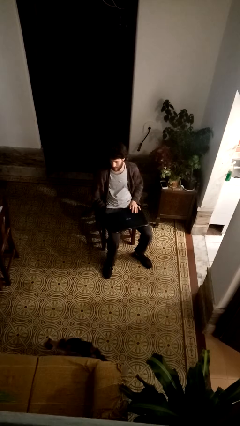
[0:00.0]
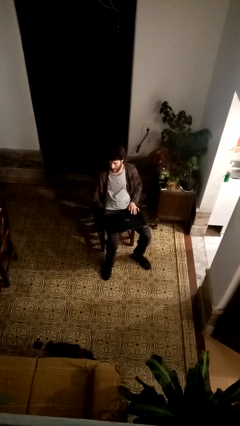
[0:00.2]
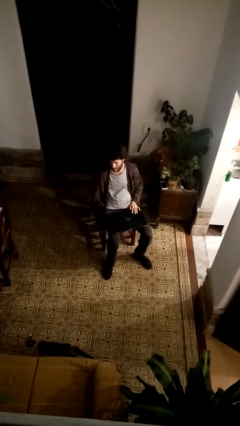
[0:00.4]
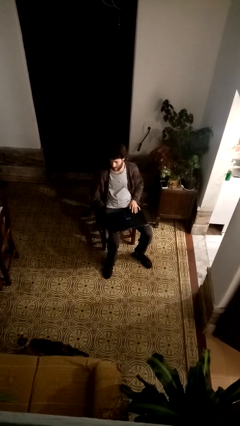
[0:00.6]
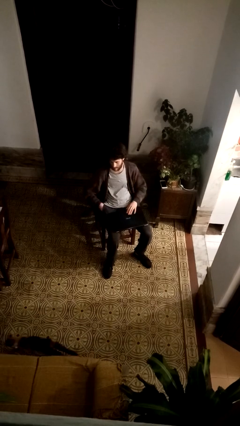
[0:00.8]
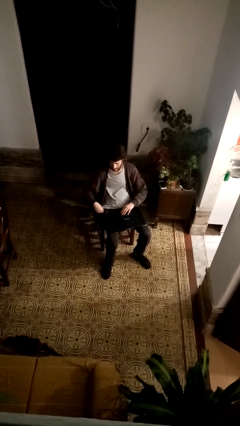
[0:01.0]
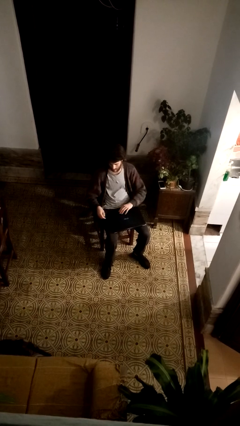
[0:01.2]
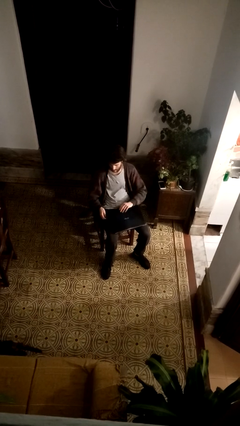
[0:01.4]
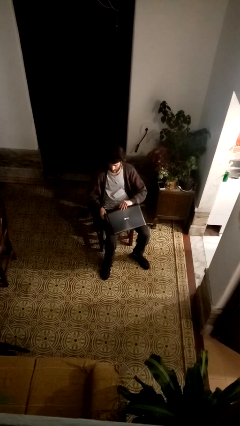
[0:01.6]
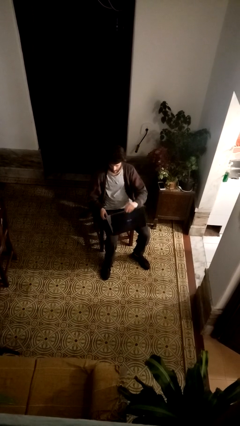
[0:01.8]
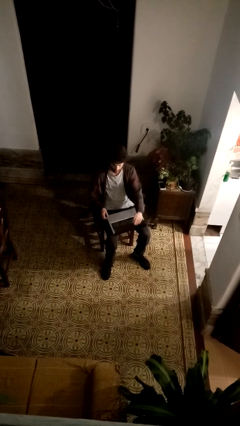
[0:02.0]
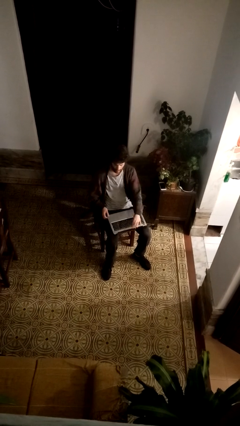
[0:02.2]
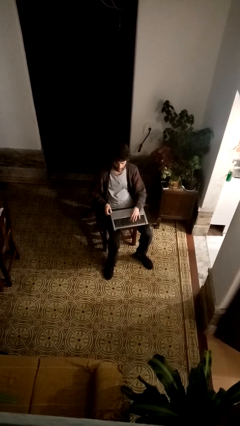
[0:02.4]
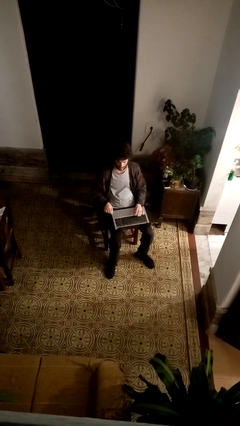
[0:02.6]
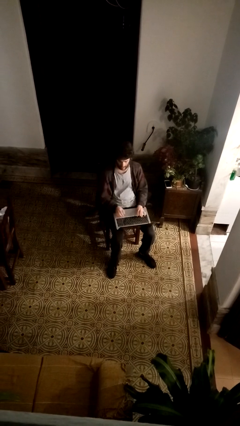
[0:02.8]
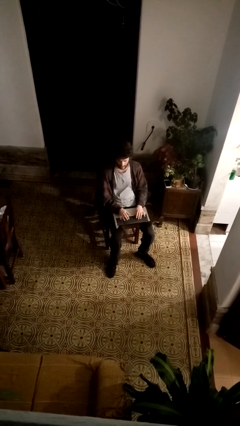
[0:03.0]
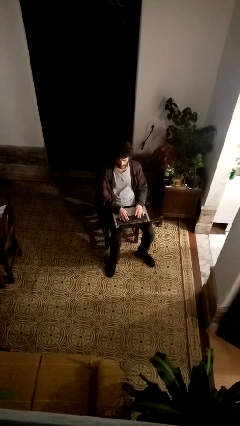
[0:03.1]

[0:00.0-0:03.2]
person opens laptop

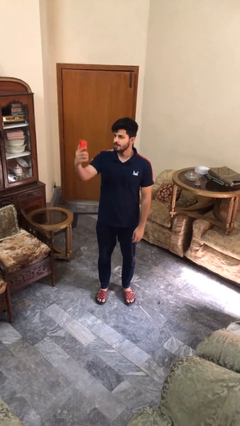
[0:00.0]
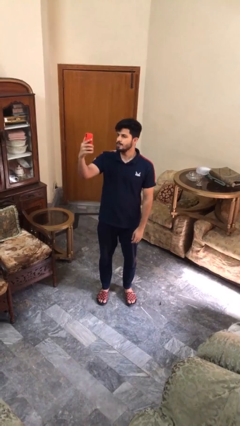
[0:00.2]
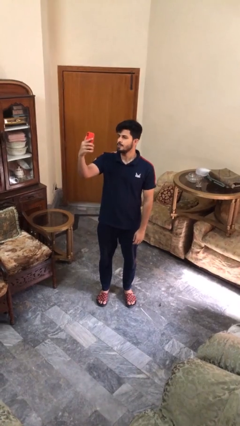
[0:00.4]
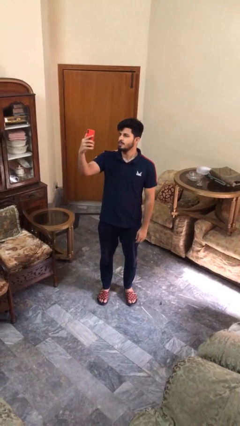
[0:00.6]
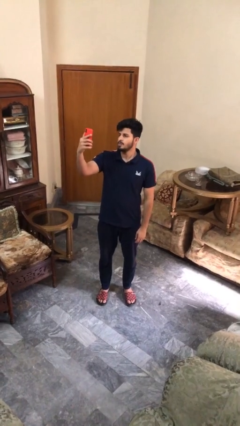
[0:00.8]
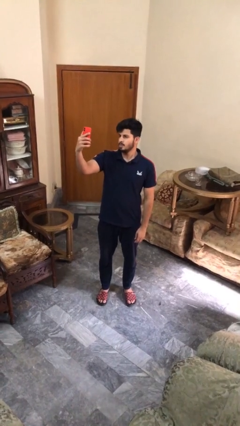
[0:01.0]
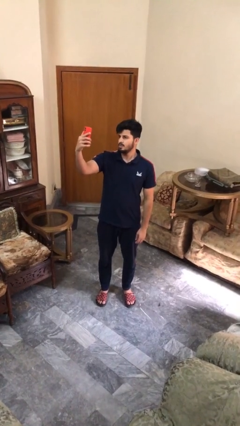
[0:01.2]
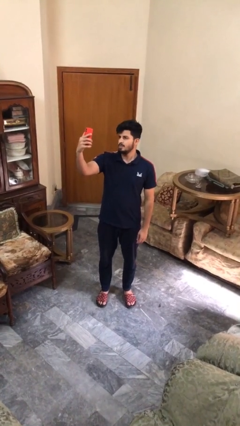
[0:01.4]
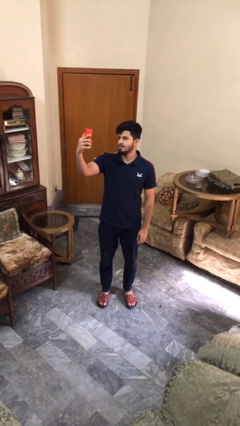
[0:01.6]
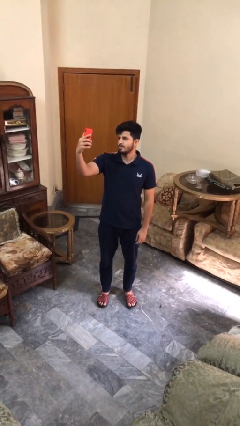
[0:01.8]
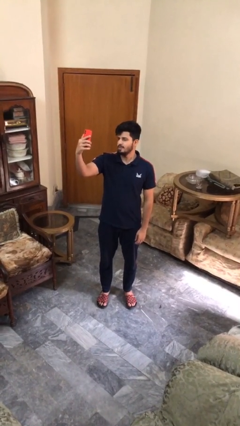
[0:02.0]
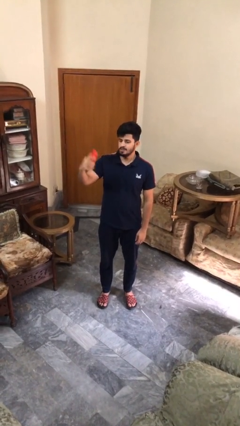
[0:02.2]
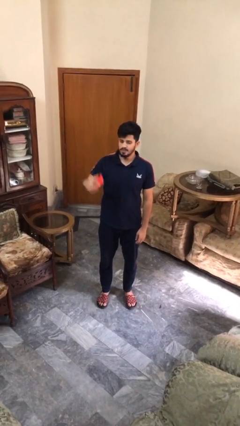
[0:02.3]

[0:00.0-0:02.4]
person takes selfie

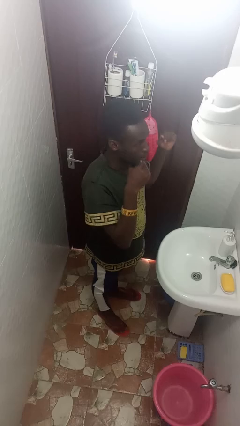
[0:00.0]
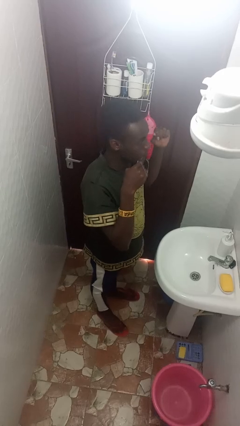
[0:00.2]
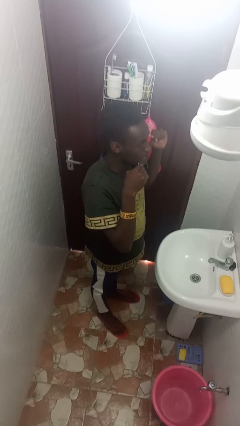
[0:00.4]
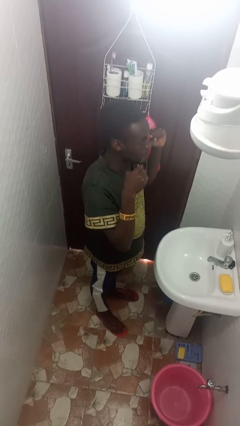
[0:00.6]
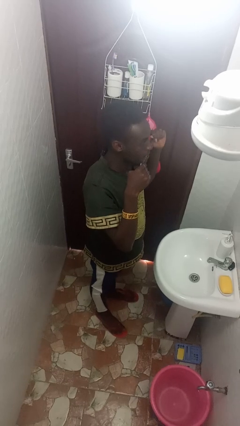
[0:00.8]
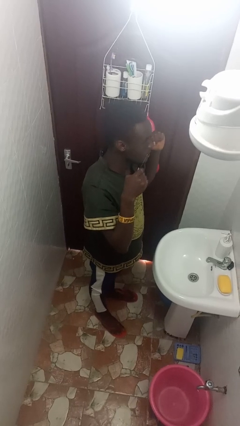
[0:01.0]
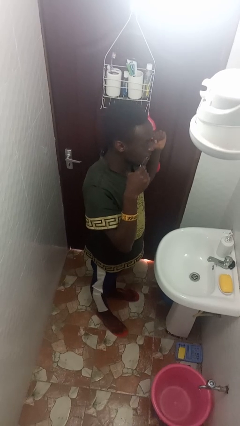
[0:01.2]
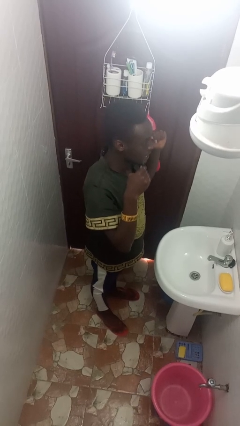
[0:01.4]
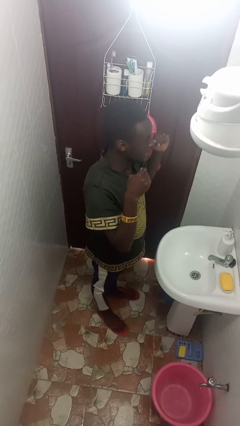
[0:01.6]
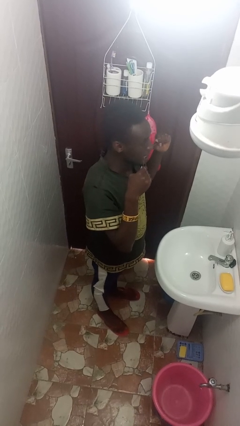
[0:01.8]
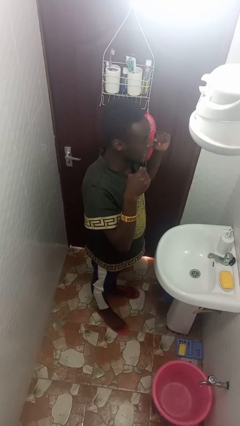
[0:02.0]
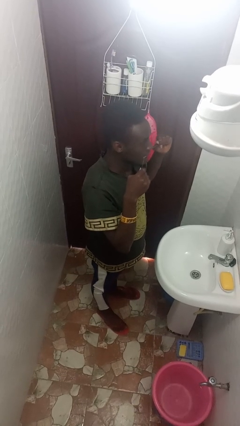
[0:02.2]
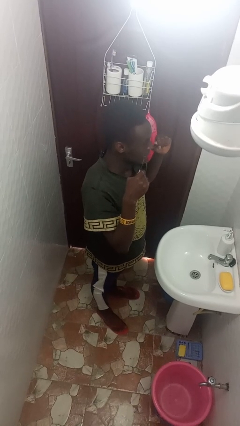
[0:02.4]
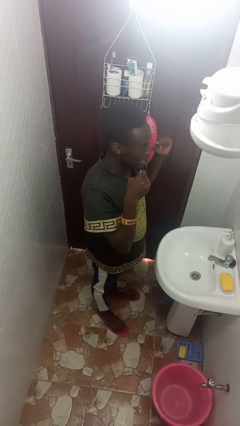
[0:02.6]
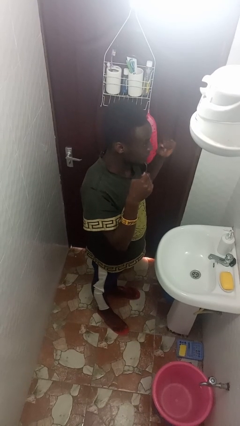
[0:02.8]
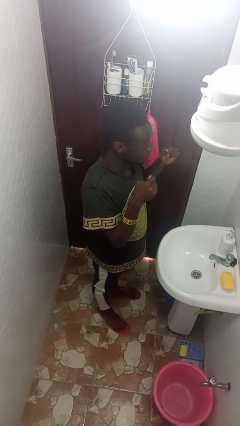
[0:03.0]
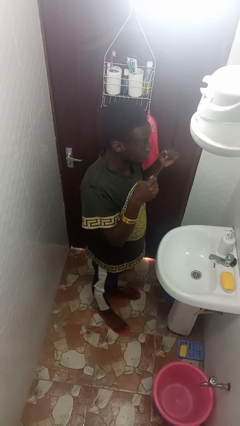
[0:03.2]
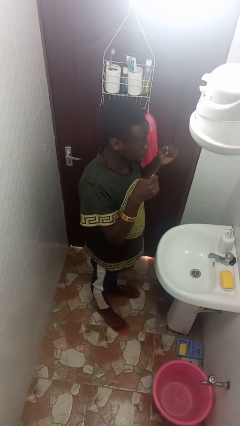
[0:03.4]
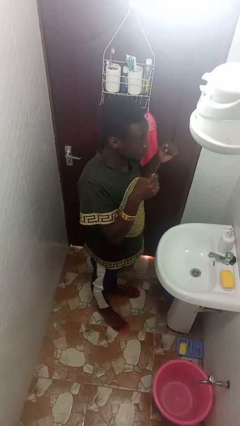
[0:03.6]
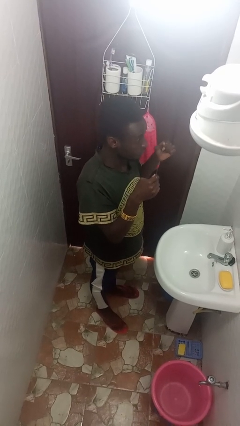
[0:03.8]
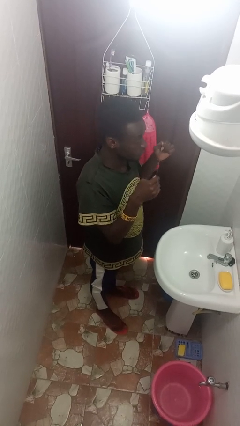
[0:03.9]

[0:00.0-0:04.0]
person flosses

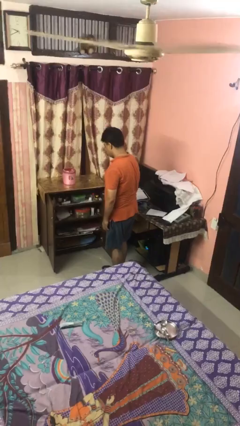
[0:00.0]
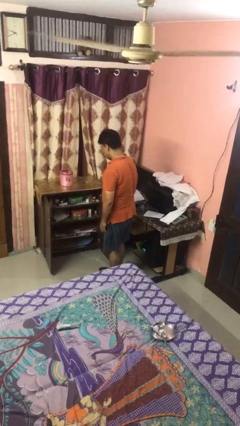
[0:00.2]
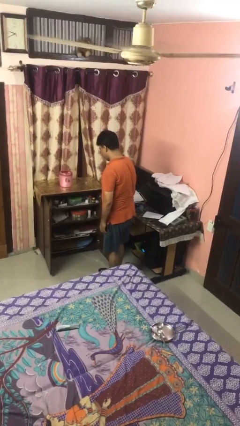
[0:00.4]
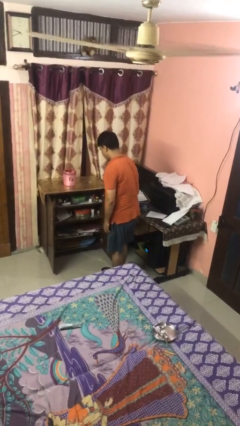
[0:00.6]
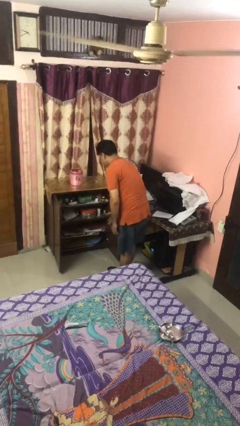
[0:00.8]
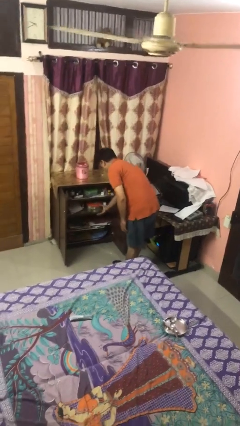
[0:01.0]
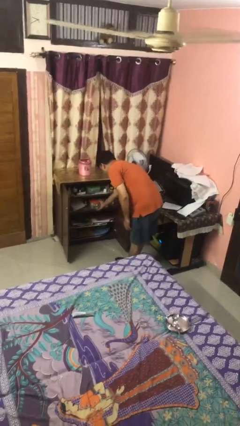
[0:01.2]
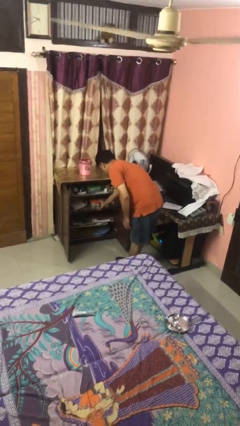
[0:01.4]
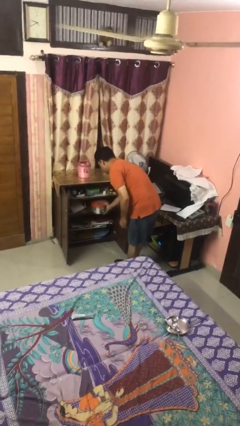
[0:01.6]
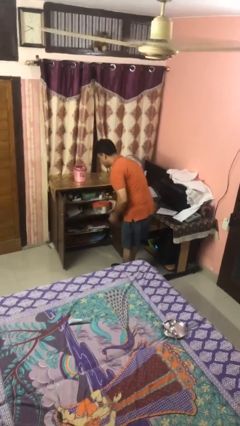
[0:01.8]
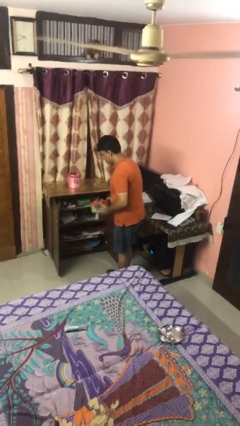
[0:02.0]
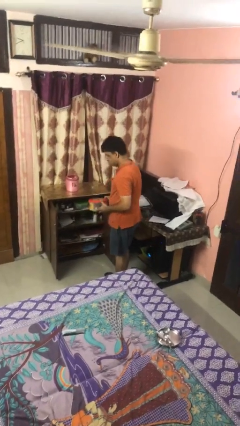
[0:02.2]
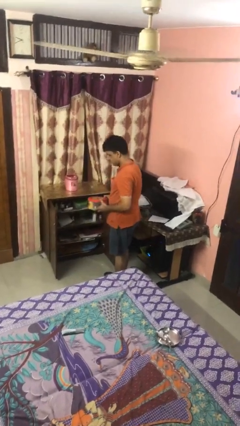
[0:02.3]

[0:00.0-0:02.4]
person picks up object from cabinet

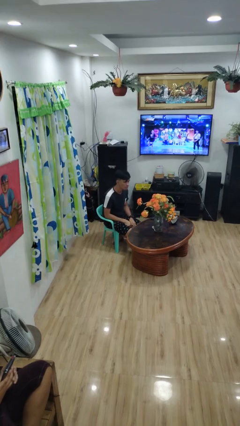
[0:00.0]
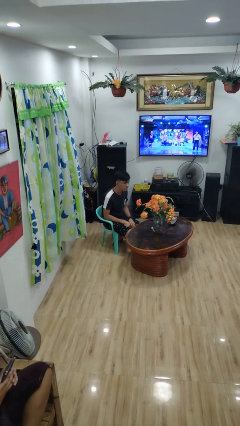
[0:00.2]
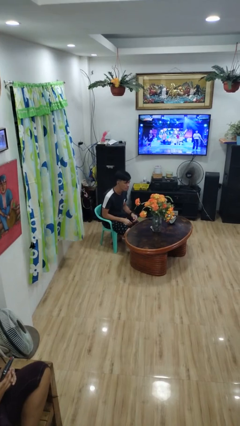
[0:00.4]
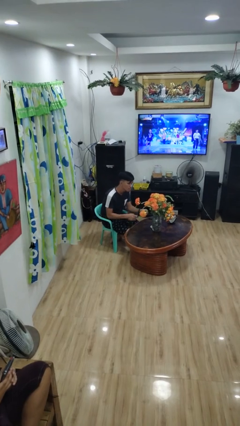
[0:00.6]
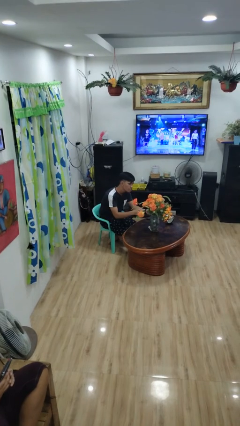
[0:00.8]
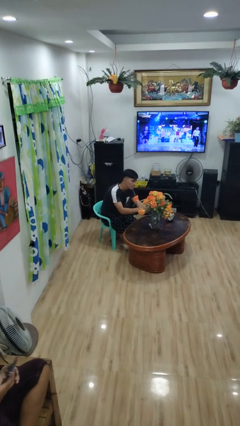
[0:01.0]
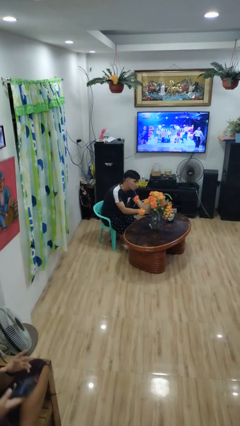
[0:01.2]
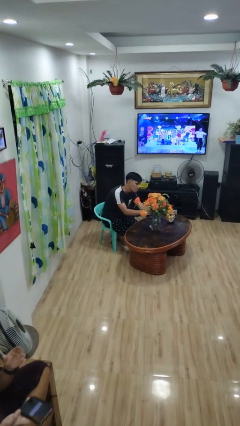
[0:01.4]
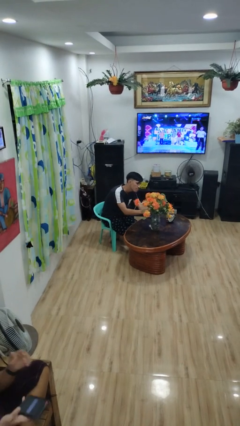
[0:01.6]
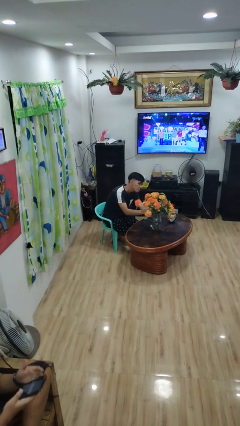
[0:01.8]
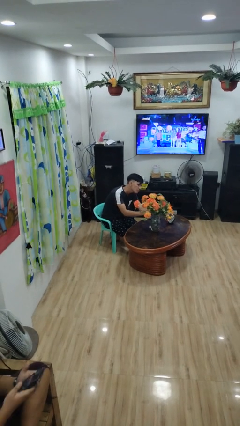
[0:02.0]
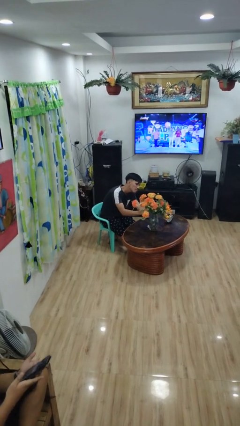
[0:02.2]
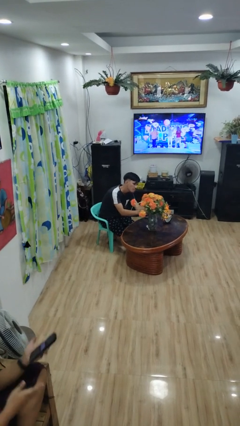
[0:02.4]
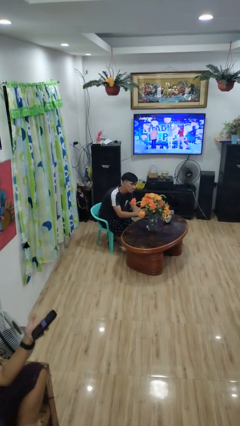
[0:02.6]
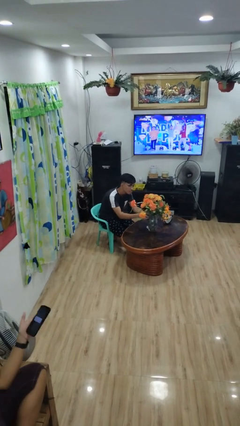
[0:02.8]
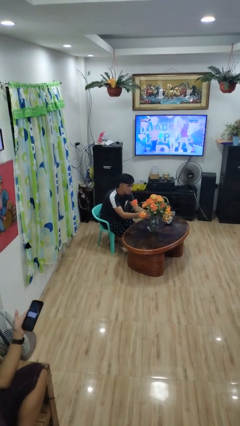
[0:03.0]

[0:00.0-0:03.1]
person arranges flowers in vase

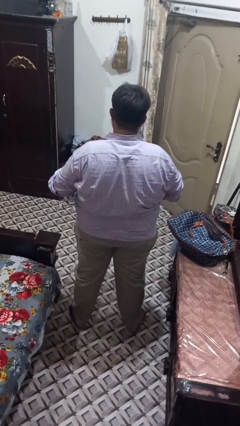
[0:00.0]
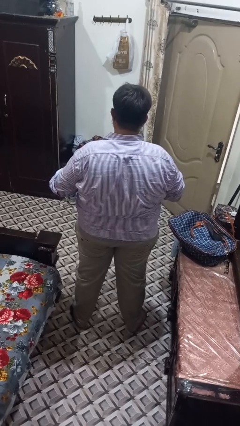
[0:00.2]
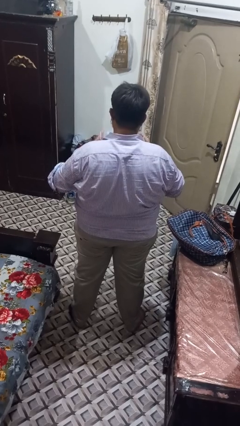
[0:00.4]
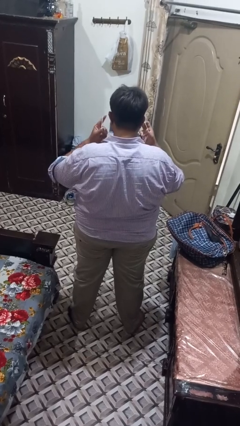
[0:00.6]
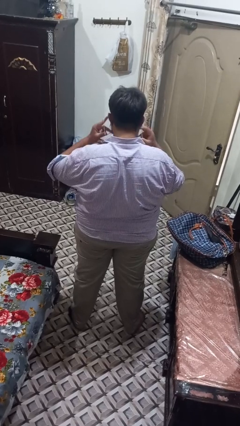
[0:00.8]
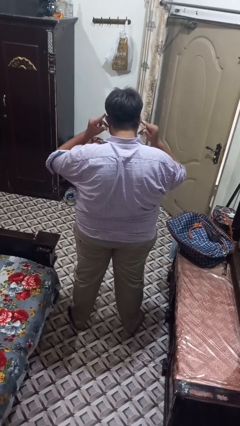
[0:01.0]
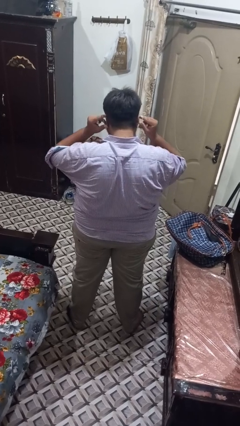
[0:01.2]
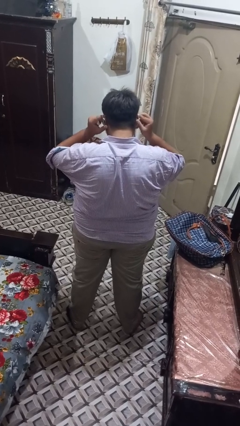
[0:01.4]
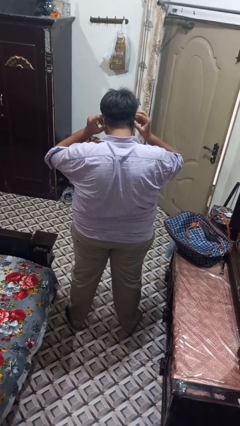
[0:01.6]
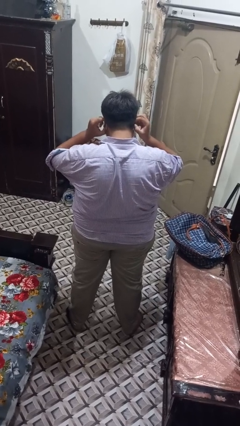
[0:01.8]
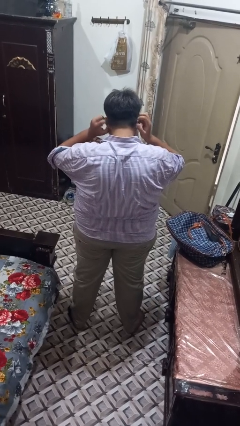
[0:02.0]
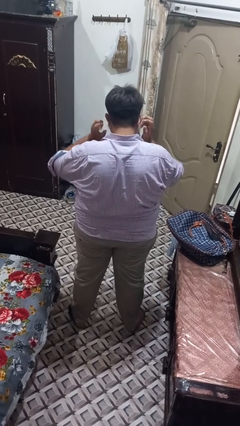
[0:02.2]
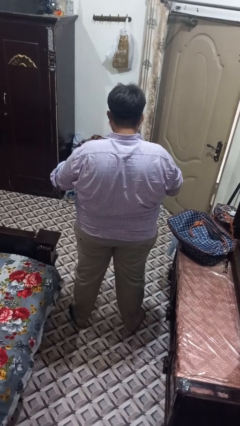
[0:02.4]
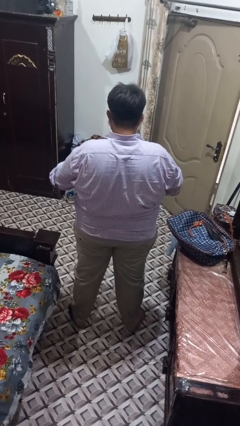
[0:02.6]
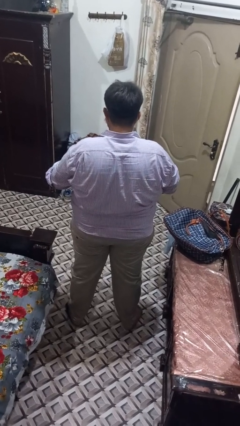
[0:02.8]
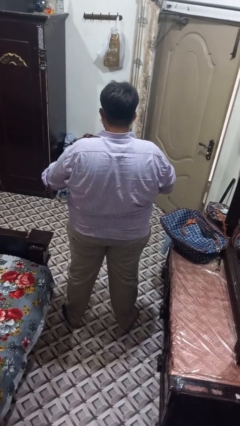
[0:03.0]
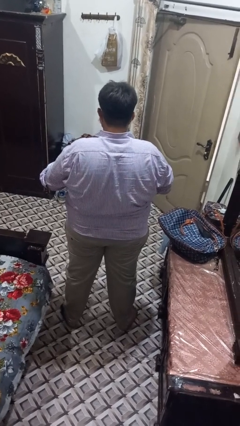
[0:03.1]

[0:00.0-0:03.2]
person puts on facemask
